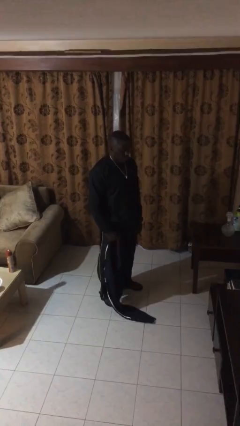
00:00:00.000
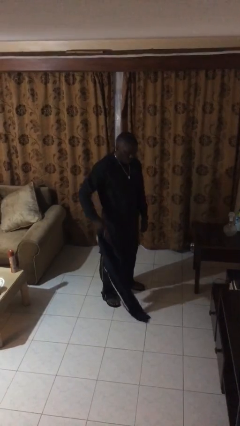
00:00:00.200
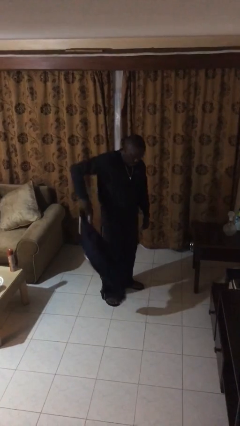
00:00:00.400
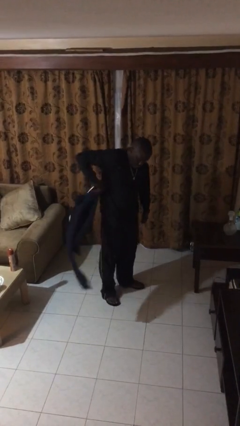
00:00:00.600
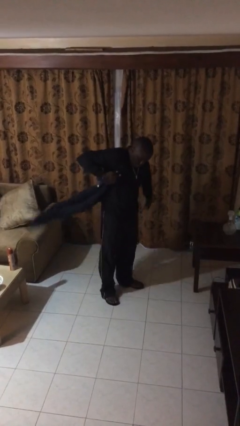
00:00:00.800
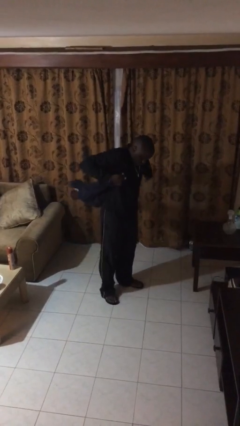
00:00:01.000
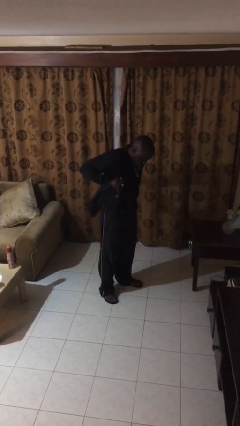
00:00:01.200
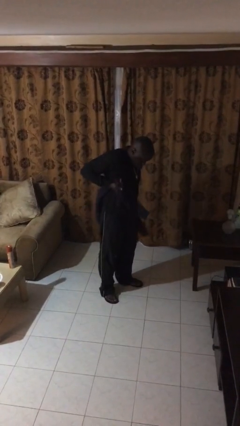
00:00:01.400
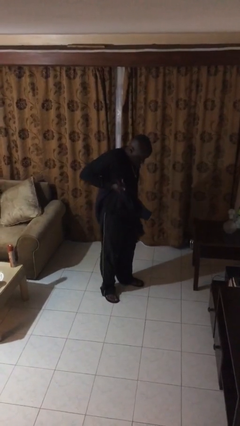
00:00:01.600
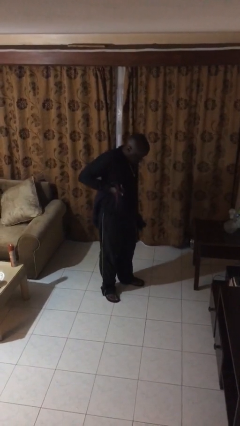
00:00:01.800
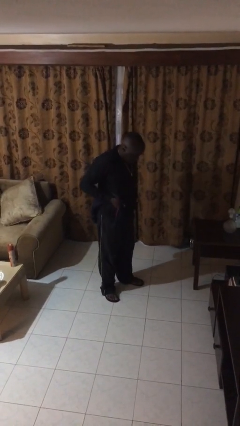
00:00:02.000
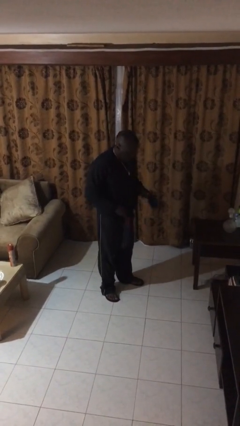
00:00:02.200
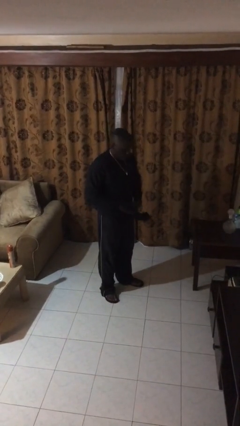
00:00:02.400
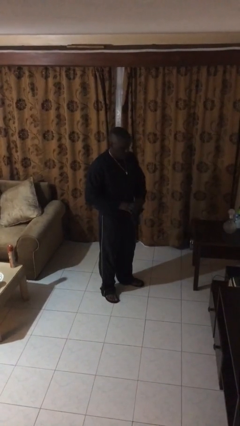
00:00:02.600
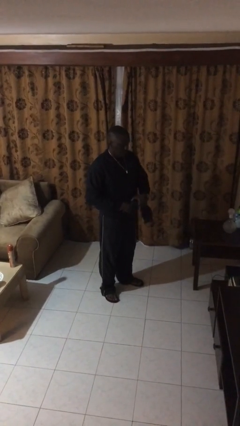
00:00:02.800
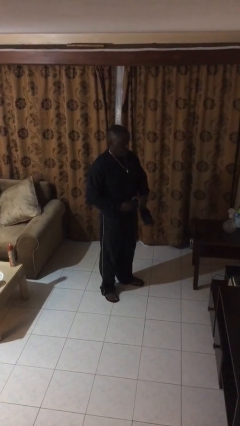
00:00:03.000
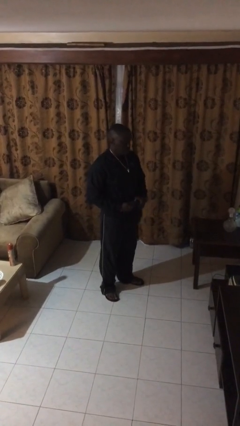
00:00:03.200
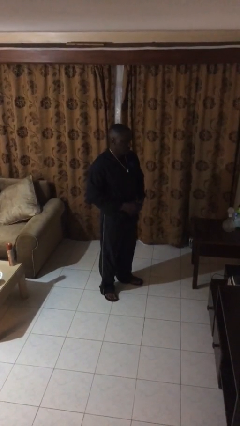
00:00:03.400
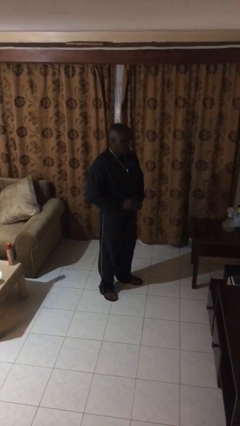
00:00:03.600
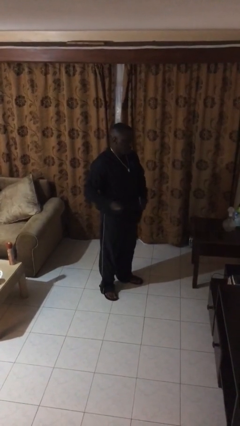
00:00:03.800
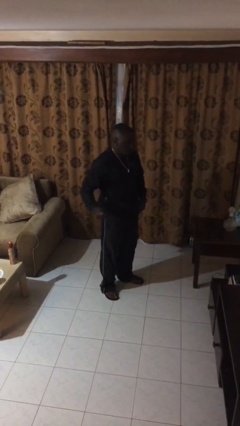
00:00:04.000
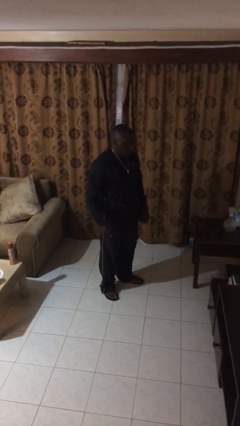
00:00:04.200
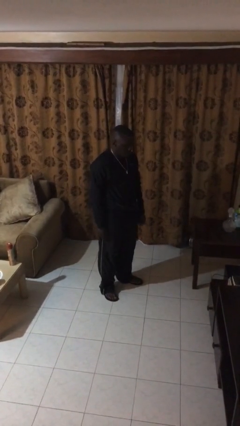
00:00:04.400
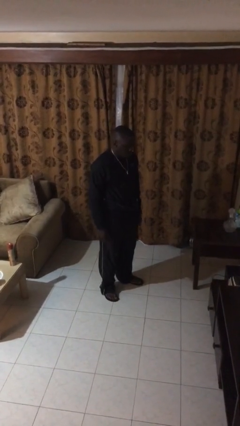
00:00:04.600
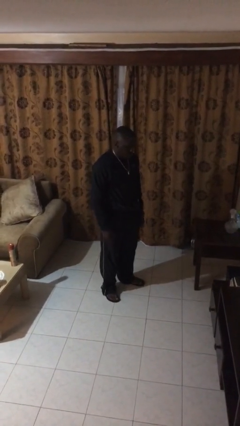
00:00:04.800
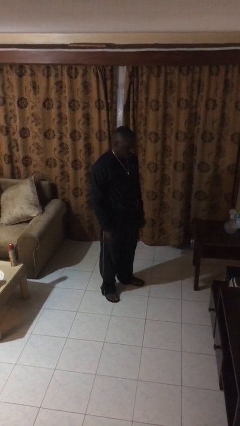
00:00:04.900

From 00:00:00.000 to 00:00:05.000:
person ties jacket around waist

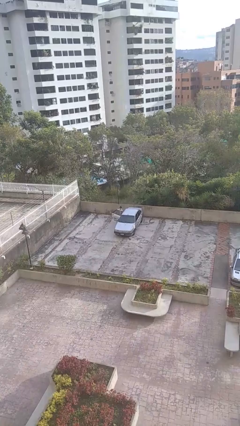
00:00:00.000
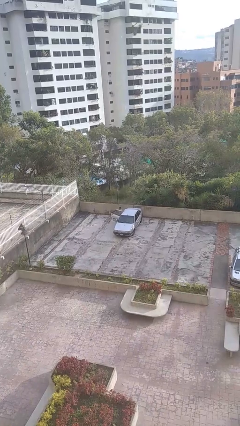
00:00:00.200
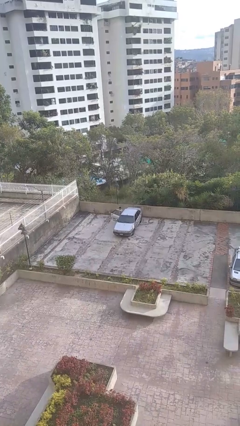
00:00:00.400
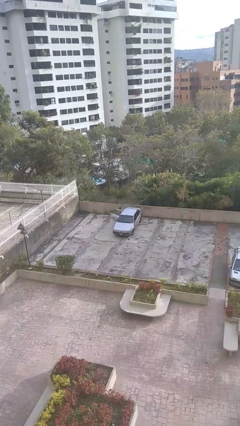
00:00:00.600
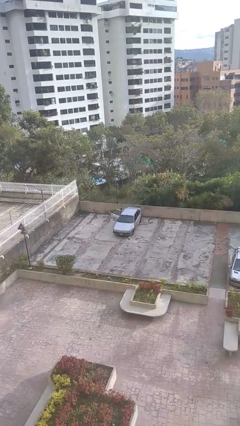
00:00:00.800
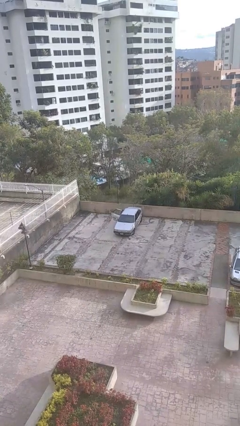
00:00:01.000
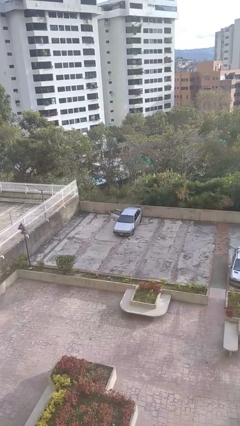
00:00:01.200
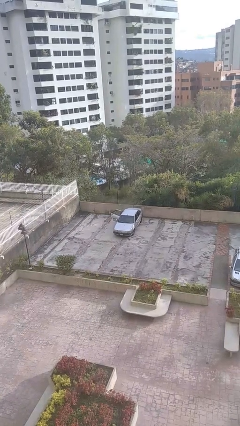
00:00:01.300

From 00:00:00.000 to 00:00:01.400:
person enters car

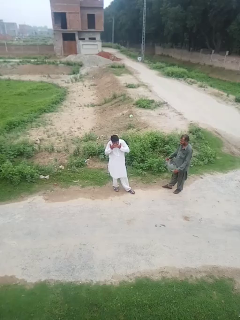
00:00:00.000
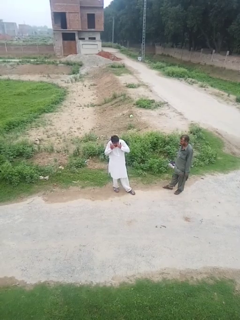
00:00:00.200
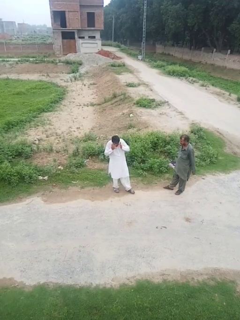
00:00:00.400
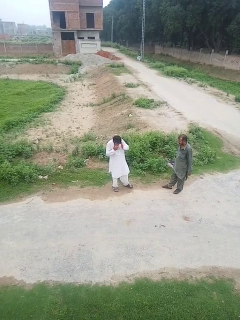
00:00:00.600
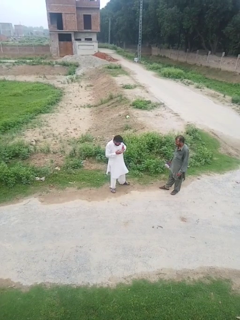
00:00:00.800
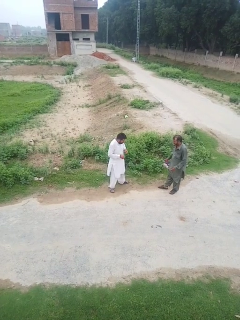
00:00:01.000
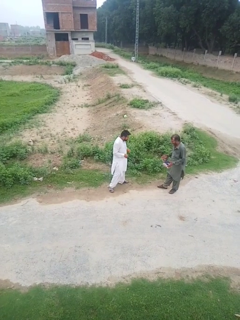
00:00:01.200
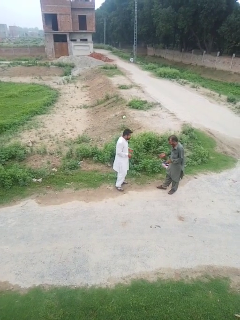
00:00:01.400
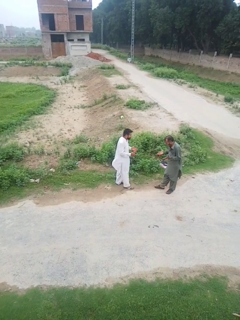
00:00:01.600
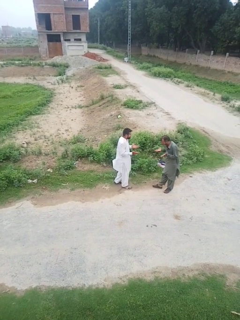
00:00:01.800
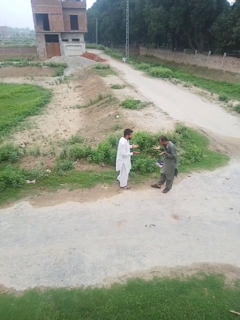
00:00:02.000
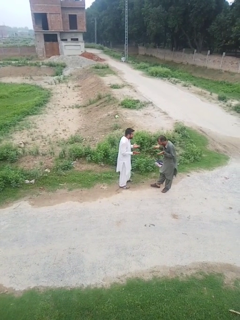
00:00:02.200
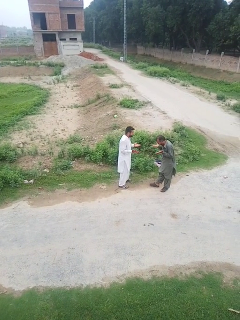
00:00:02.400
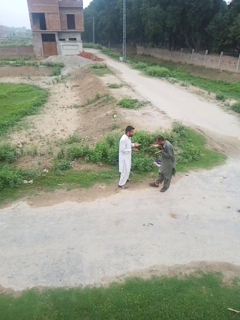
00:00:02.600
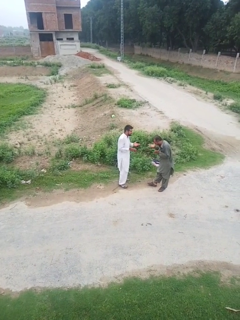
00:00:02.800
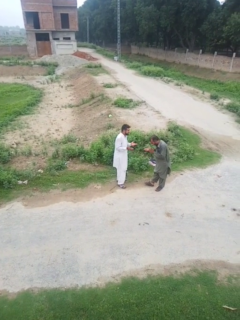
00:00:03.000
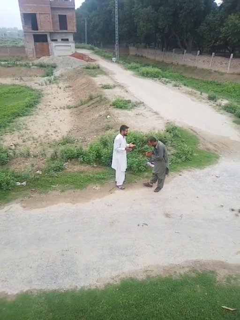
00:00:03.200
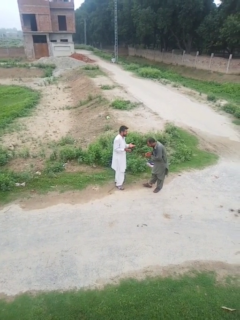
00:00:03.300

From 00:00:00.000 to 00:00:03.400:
person laughs with person

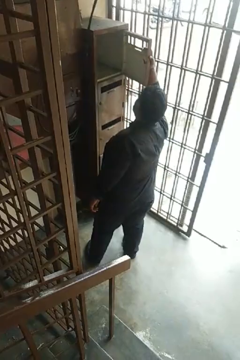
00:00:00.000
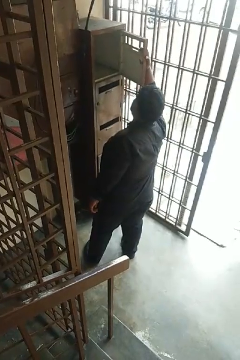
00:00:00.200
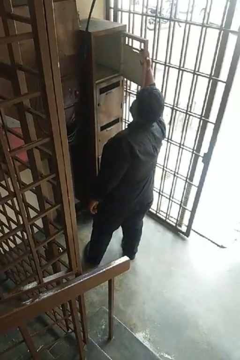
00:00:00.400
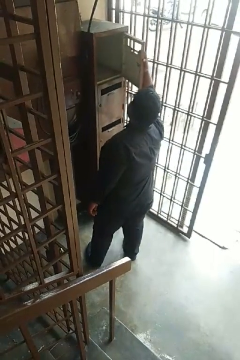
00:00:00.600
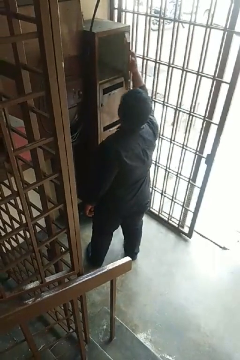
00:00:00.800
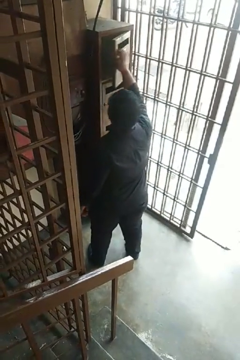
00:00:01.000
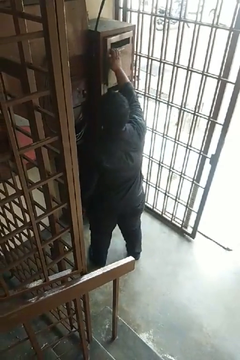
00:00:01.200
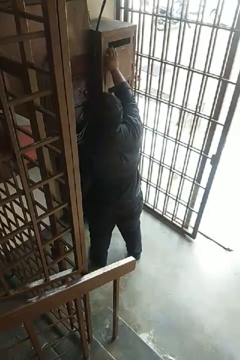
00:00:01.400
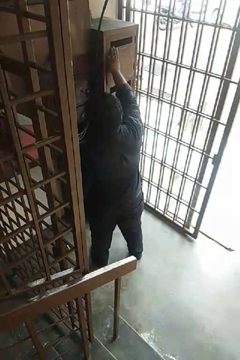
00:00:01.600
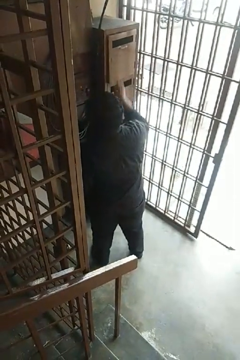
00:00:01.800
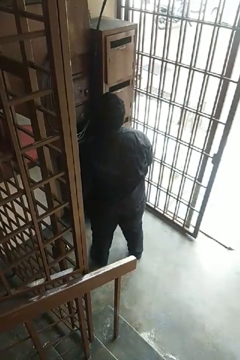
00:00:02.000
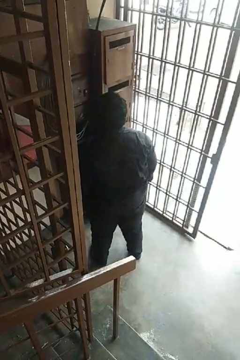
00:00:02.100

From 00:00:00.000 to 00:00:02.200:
person closes mailbox

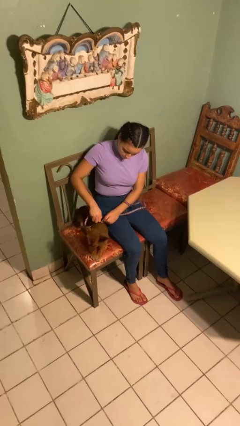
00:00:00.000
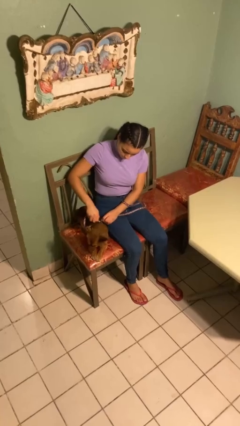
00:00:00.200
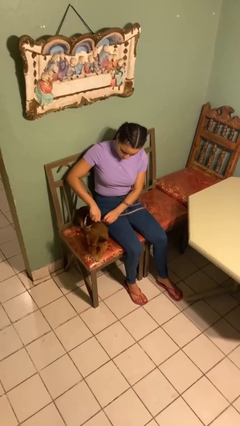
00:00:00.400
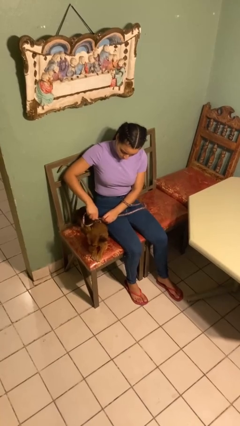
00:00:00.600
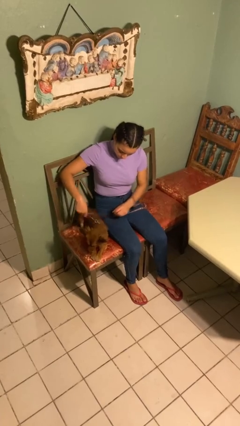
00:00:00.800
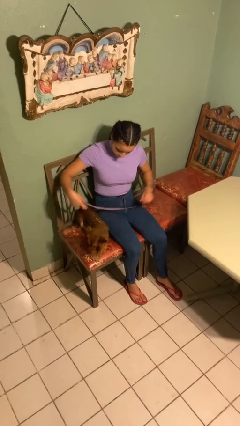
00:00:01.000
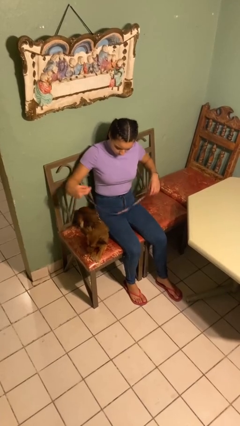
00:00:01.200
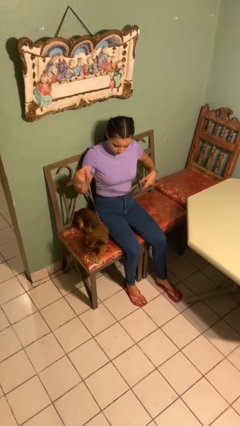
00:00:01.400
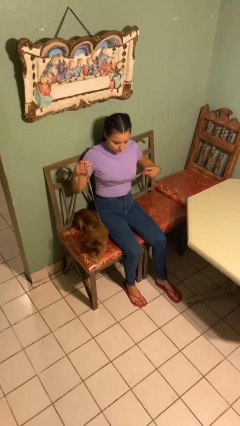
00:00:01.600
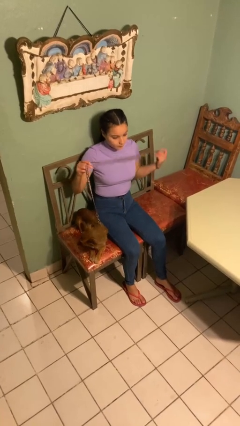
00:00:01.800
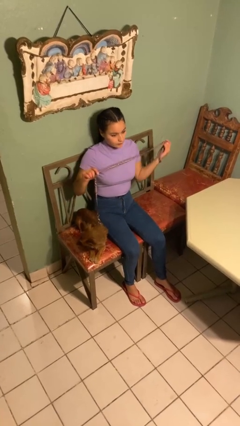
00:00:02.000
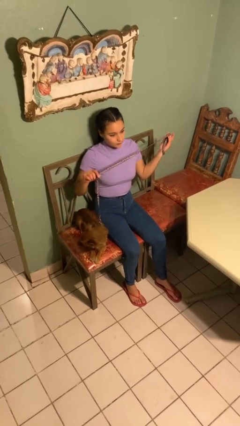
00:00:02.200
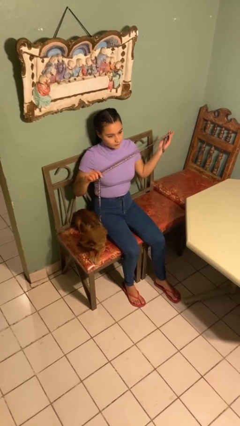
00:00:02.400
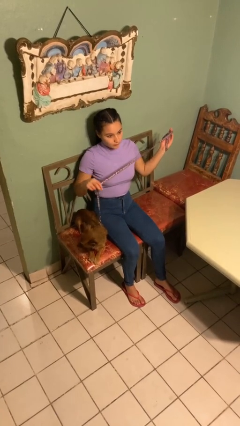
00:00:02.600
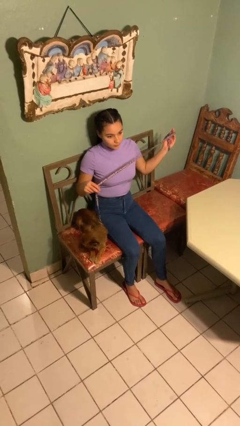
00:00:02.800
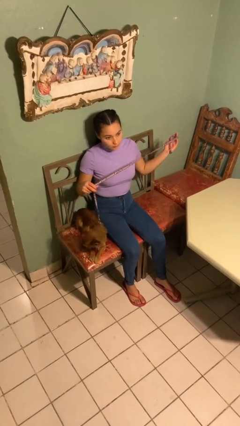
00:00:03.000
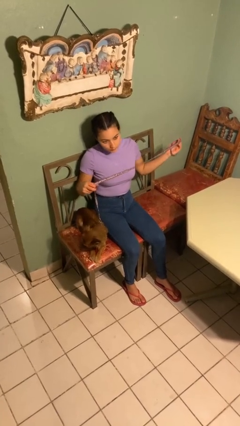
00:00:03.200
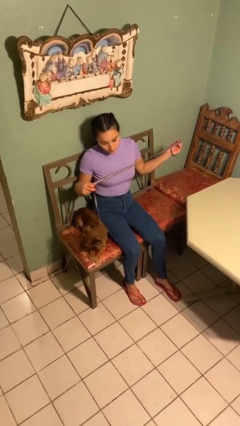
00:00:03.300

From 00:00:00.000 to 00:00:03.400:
person attaches leash to dog

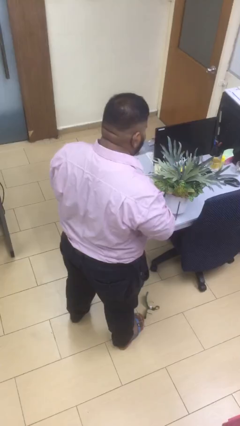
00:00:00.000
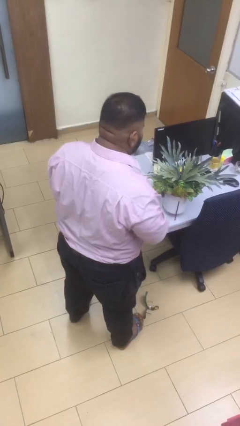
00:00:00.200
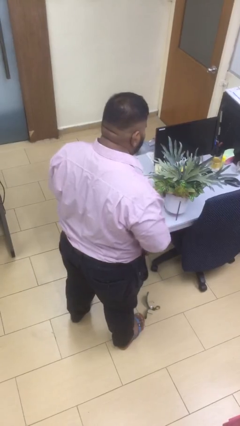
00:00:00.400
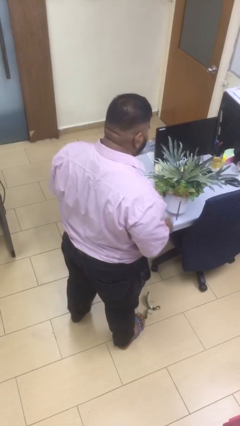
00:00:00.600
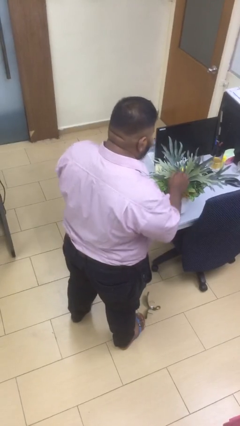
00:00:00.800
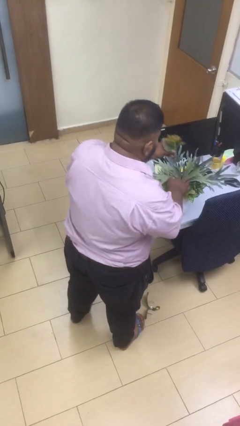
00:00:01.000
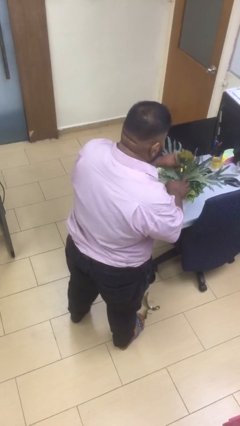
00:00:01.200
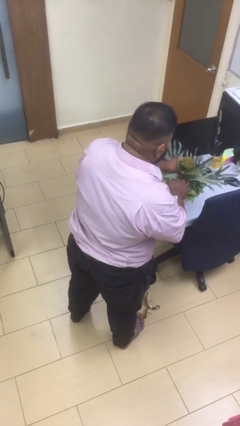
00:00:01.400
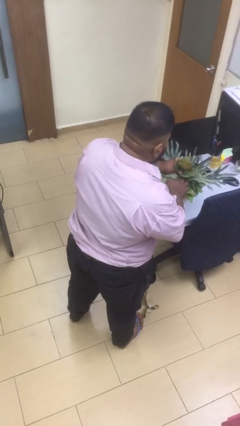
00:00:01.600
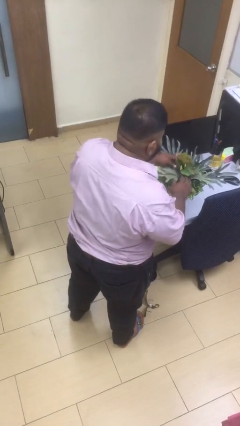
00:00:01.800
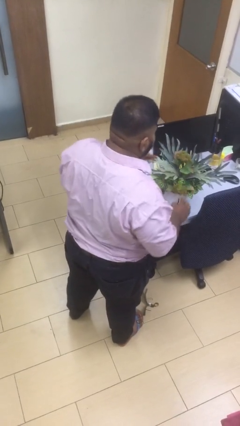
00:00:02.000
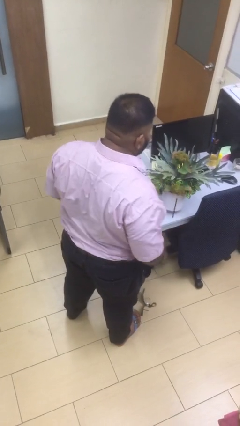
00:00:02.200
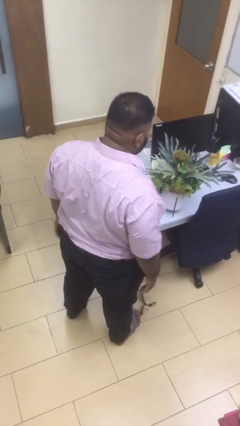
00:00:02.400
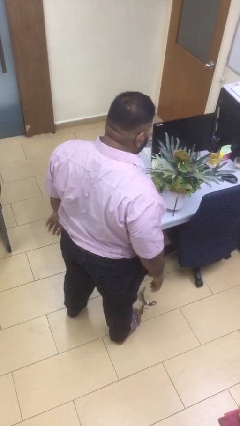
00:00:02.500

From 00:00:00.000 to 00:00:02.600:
person arranges flowers in vase

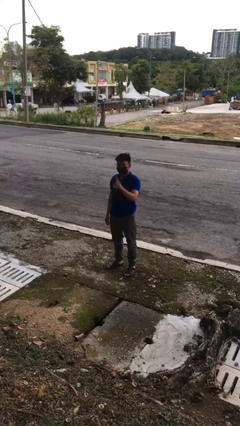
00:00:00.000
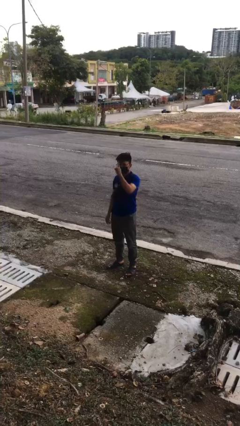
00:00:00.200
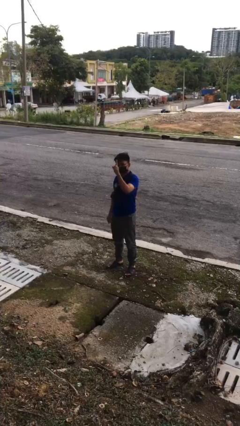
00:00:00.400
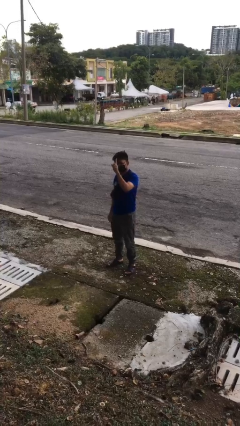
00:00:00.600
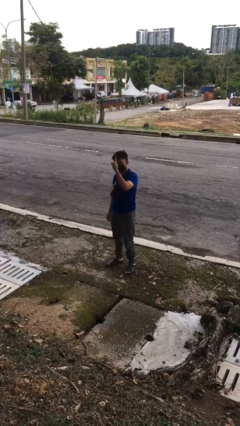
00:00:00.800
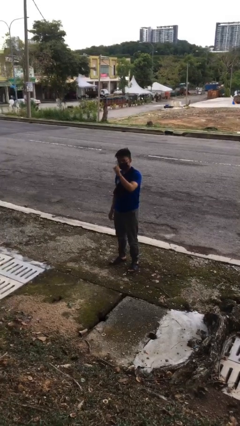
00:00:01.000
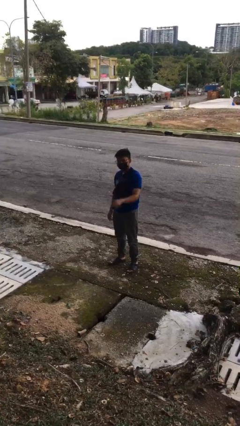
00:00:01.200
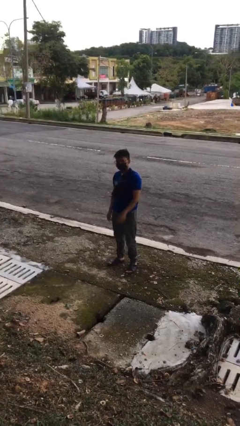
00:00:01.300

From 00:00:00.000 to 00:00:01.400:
person gestures number one
